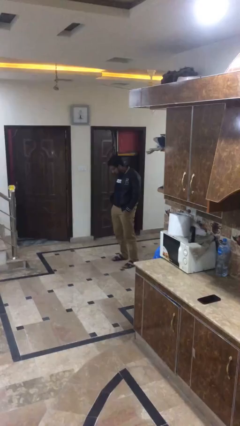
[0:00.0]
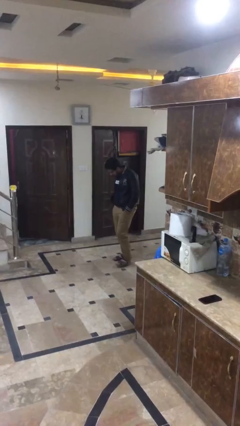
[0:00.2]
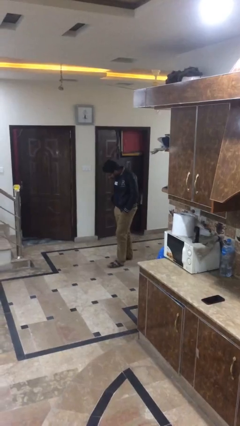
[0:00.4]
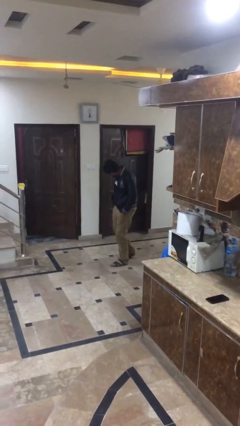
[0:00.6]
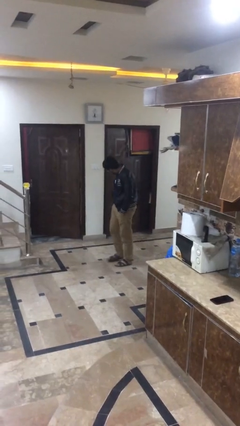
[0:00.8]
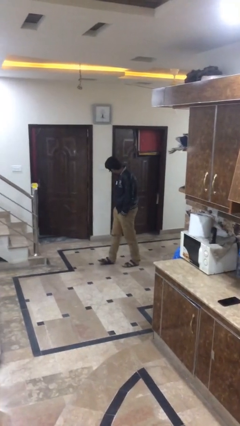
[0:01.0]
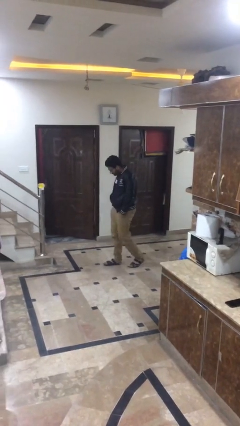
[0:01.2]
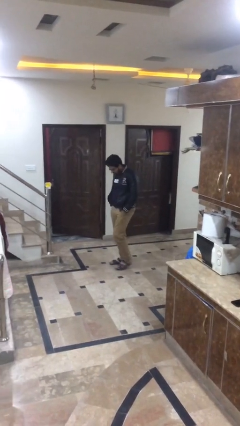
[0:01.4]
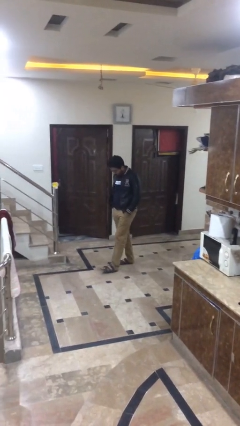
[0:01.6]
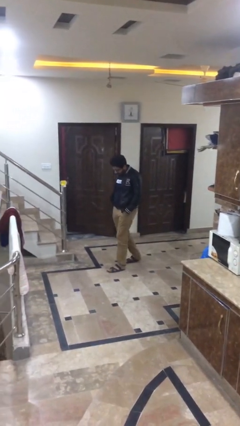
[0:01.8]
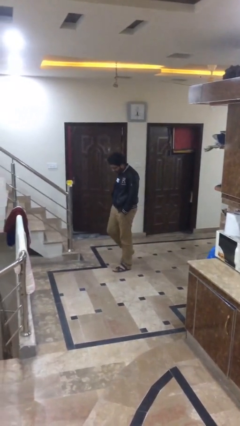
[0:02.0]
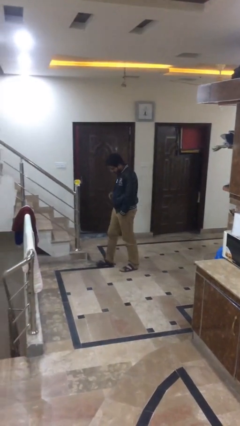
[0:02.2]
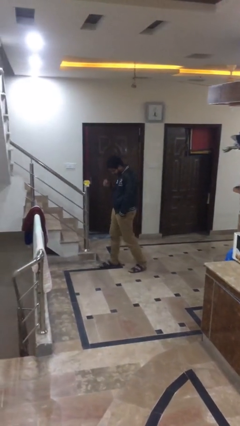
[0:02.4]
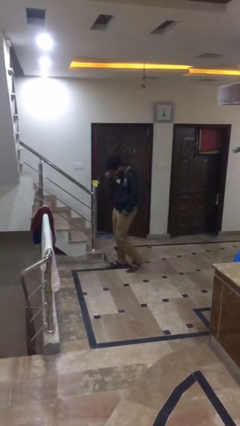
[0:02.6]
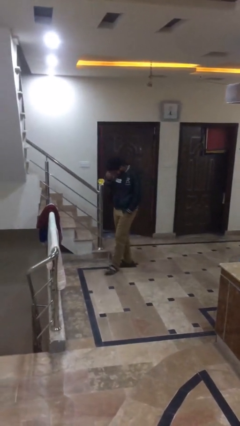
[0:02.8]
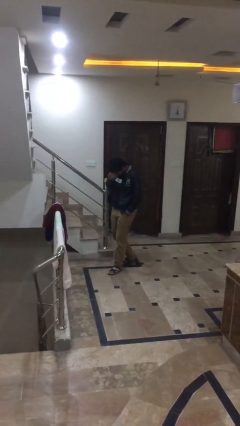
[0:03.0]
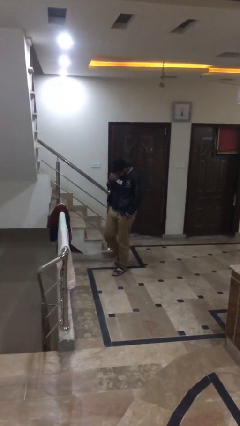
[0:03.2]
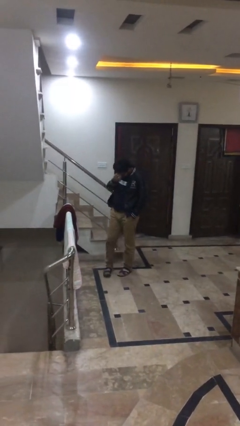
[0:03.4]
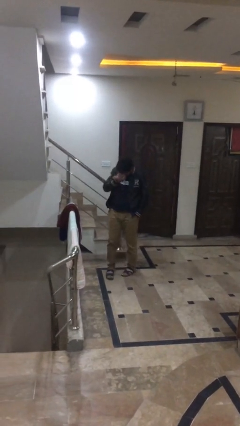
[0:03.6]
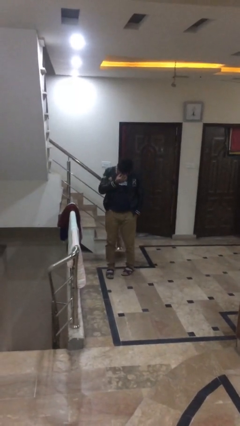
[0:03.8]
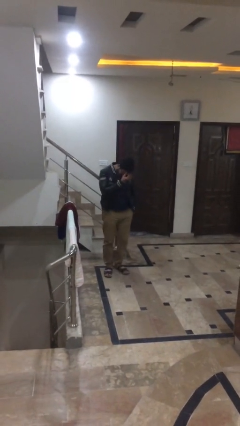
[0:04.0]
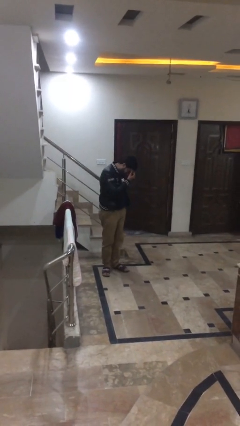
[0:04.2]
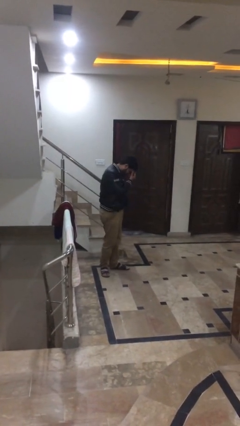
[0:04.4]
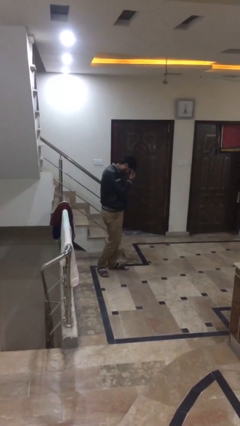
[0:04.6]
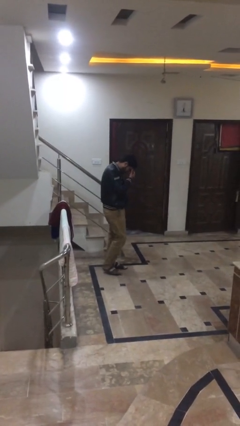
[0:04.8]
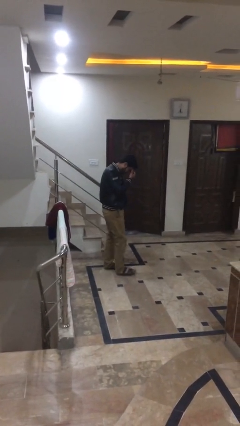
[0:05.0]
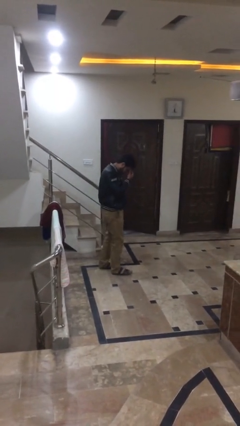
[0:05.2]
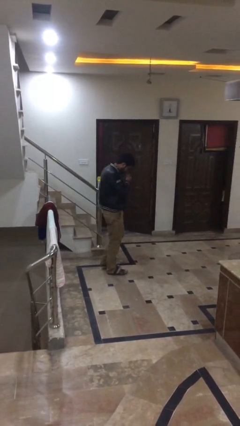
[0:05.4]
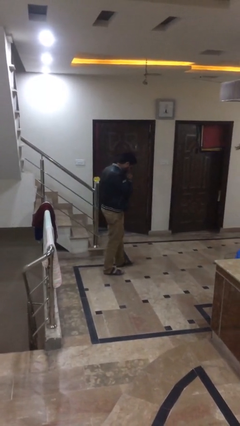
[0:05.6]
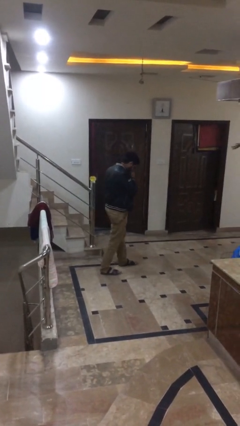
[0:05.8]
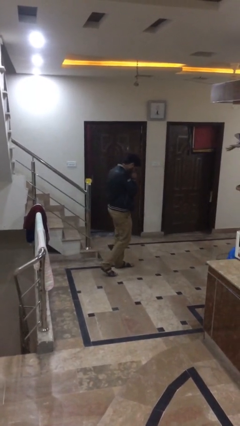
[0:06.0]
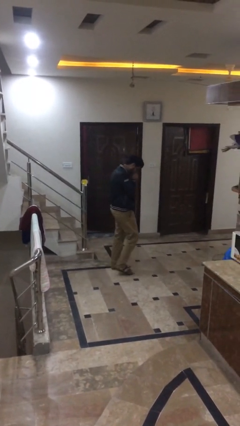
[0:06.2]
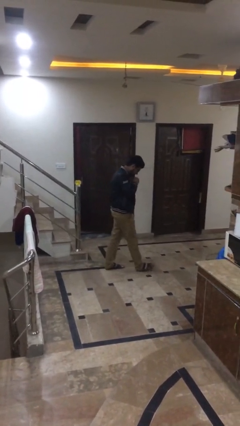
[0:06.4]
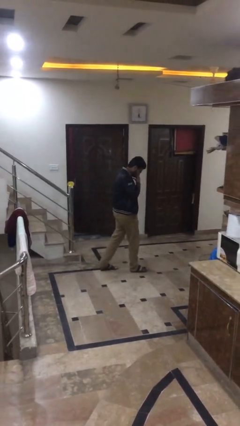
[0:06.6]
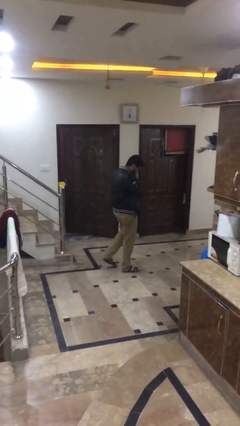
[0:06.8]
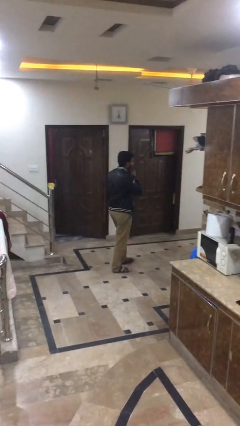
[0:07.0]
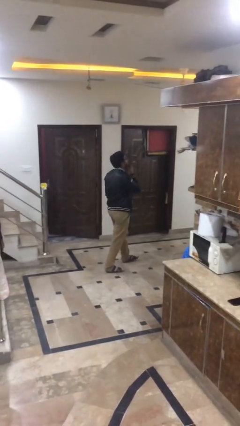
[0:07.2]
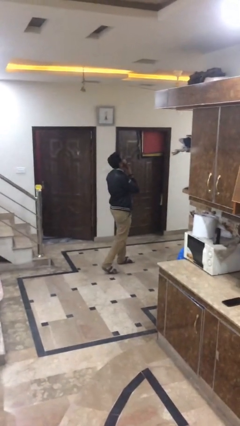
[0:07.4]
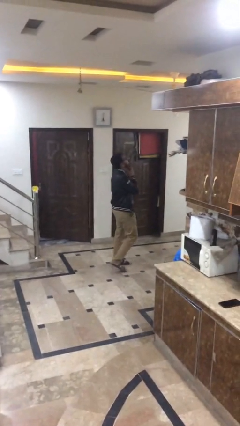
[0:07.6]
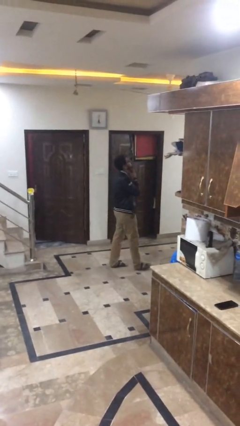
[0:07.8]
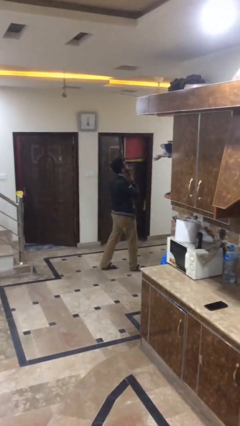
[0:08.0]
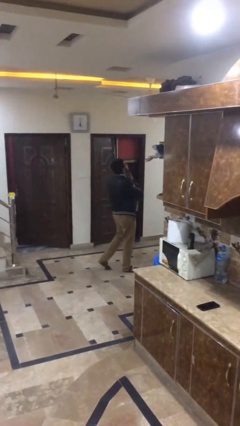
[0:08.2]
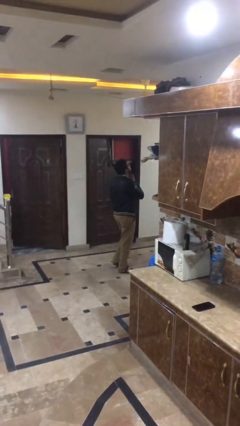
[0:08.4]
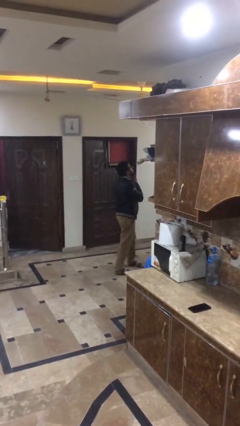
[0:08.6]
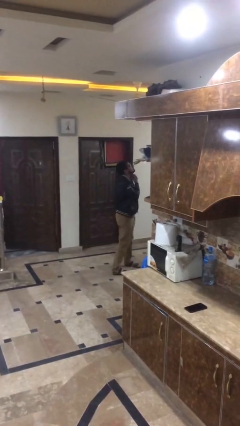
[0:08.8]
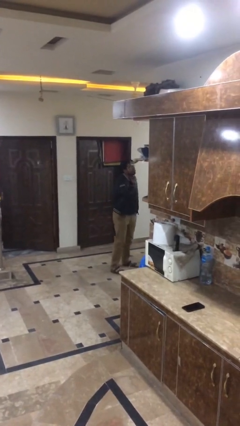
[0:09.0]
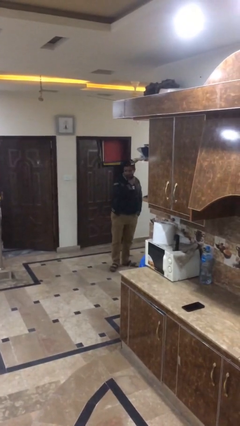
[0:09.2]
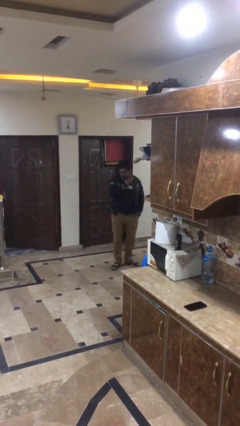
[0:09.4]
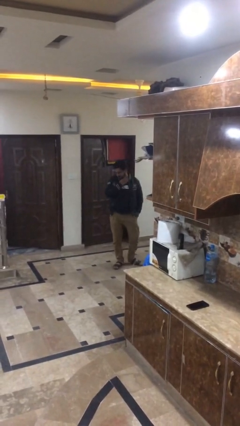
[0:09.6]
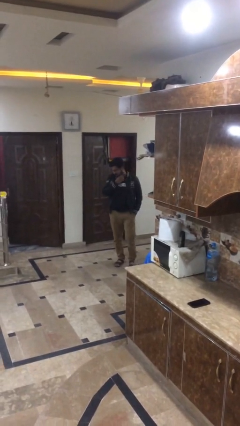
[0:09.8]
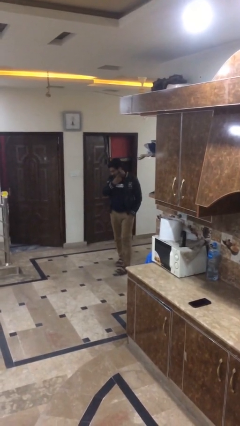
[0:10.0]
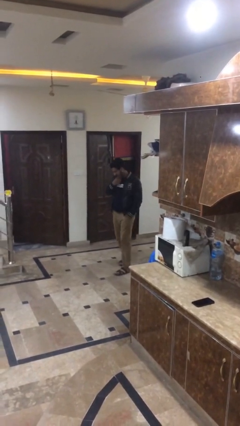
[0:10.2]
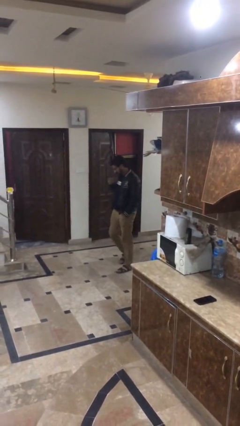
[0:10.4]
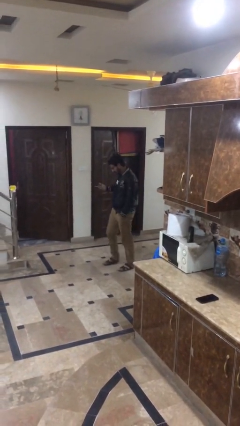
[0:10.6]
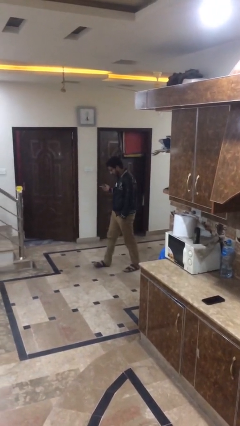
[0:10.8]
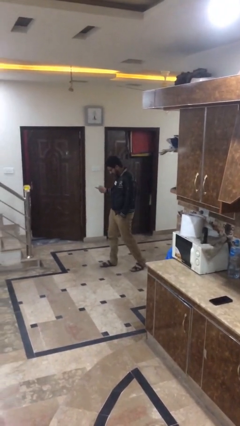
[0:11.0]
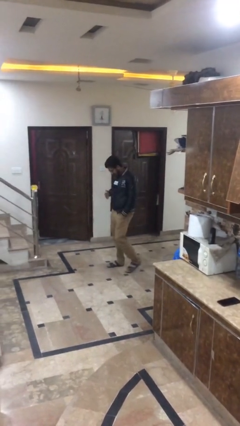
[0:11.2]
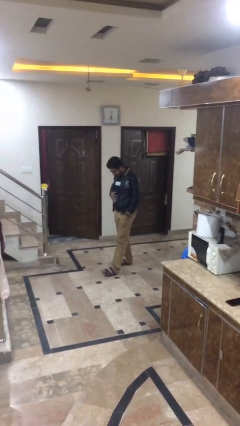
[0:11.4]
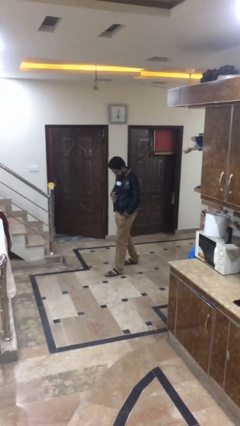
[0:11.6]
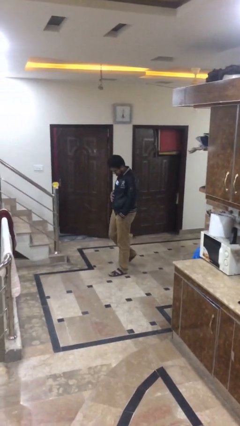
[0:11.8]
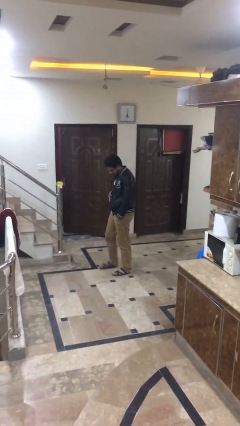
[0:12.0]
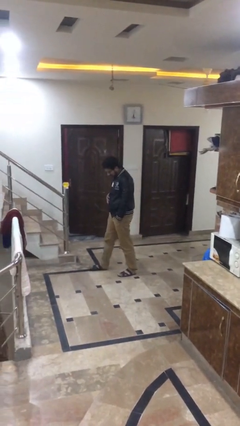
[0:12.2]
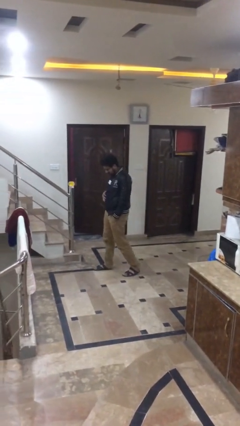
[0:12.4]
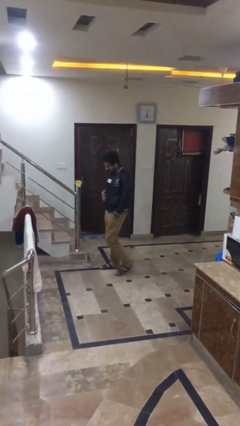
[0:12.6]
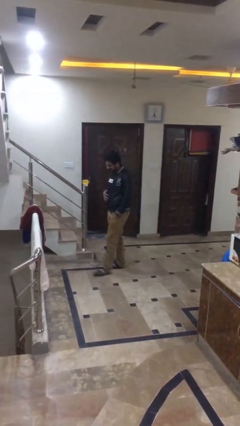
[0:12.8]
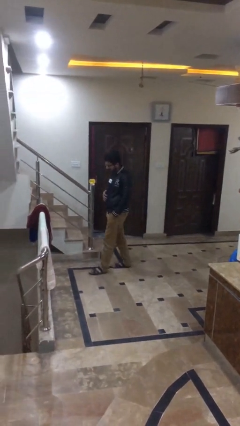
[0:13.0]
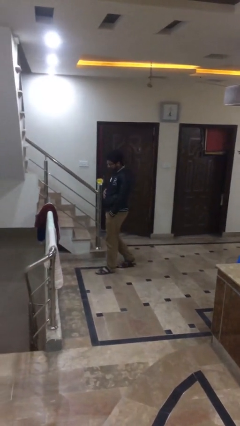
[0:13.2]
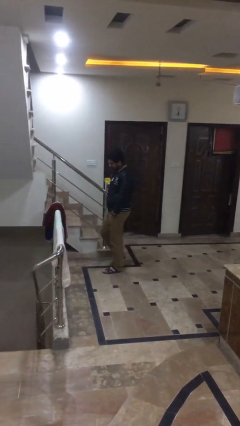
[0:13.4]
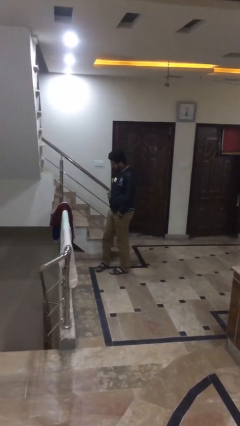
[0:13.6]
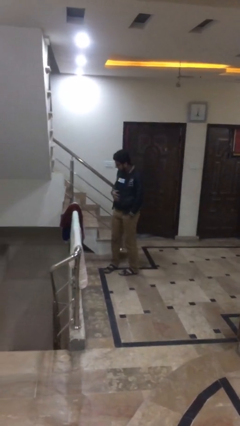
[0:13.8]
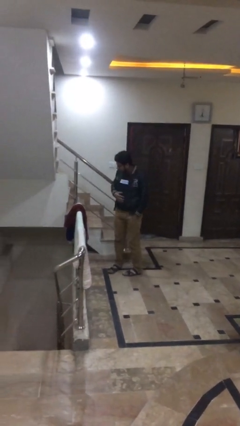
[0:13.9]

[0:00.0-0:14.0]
person walks

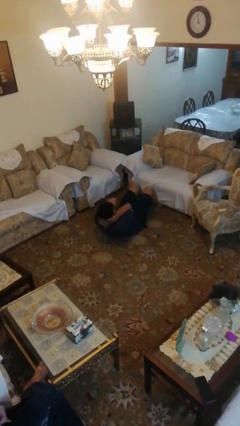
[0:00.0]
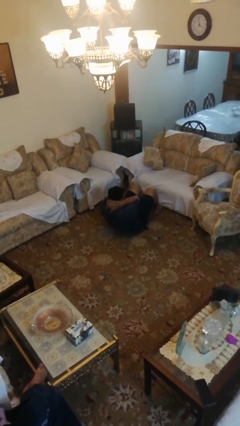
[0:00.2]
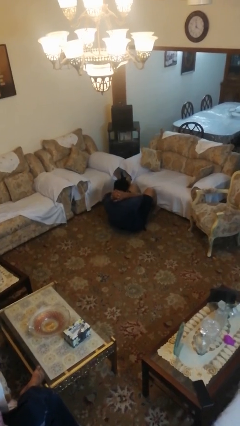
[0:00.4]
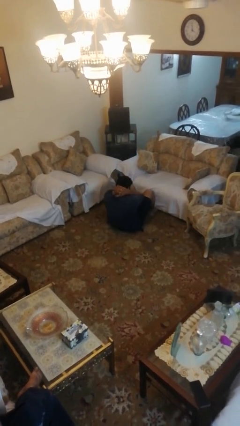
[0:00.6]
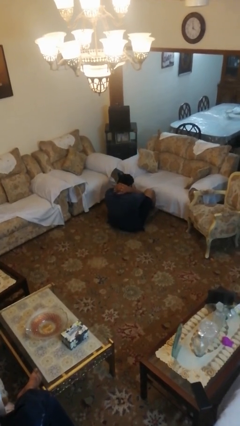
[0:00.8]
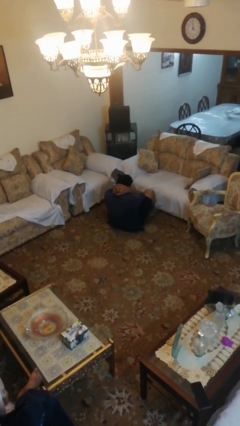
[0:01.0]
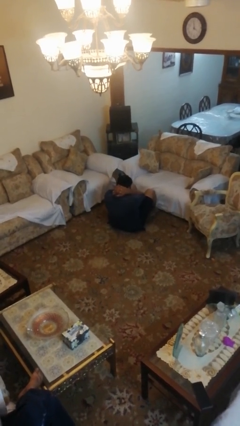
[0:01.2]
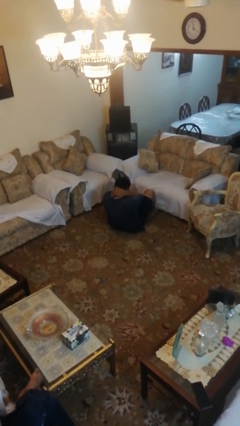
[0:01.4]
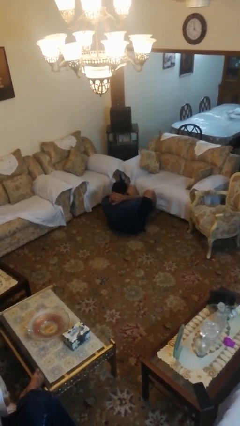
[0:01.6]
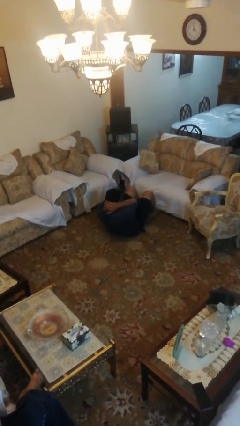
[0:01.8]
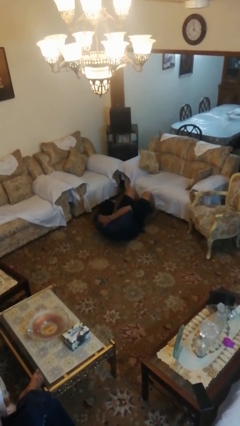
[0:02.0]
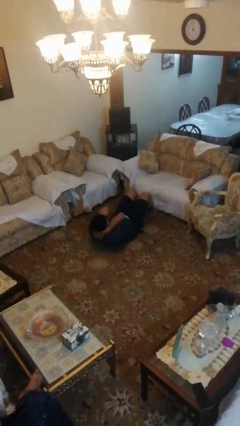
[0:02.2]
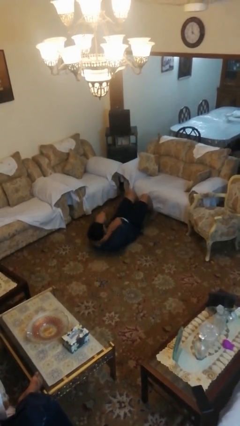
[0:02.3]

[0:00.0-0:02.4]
person exercises with situp

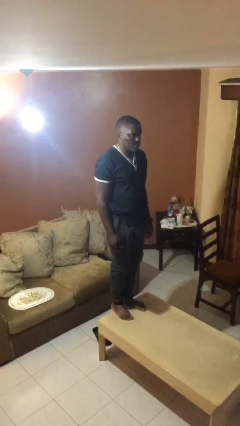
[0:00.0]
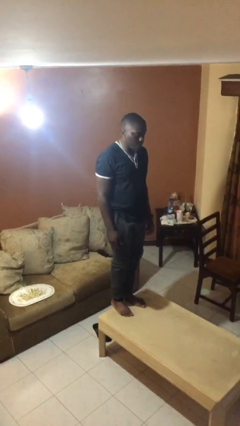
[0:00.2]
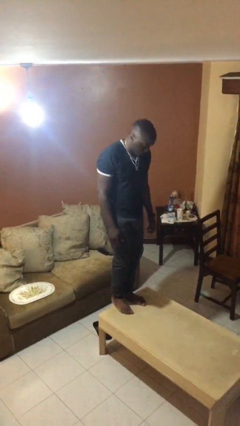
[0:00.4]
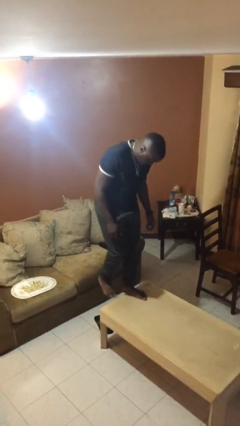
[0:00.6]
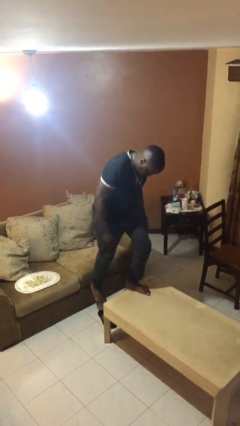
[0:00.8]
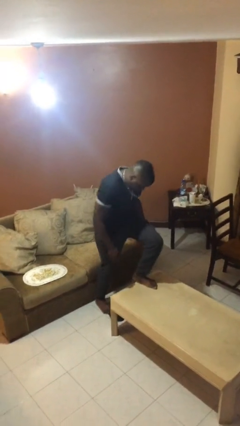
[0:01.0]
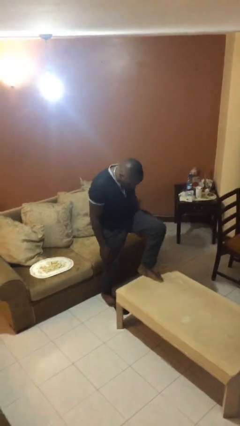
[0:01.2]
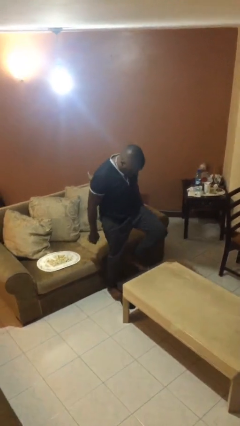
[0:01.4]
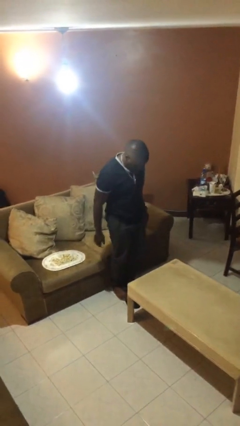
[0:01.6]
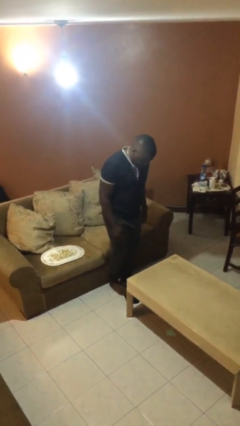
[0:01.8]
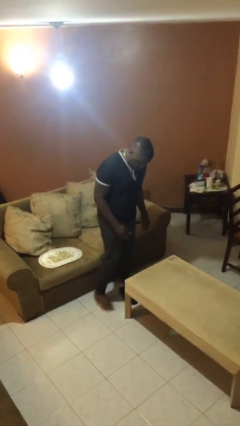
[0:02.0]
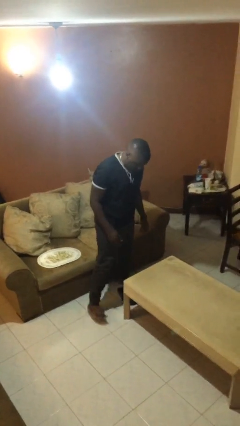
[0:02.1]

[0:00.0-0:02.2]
person climbs off table
